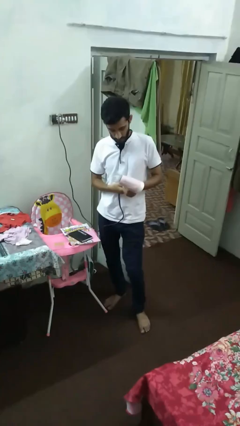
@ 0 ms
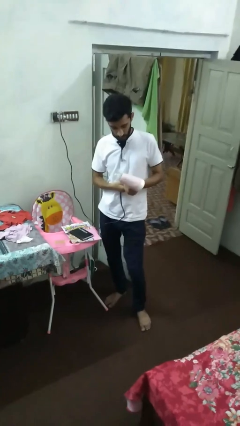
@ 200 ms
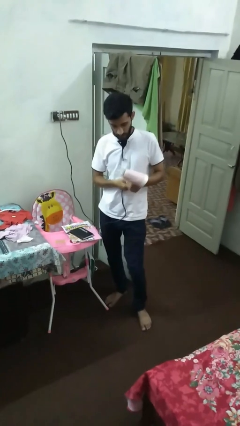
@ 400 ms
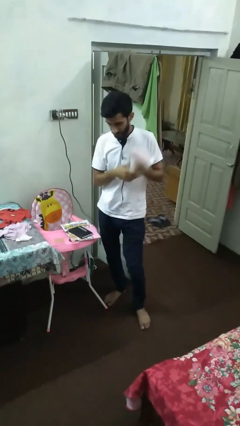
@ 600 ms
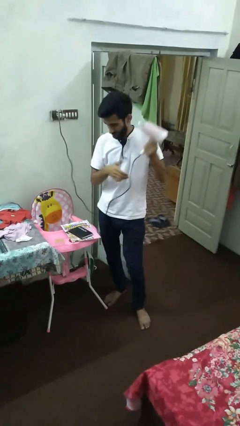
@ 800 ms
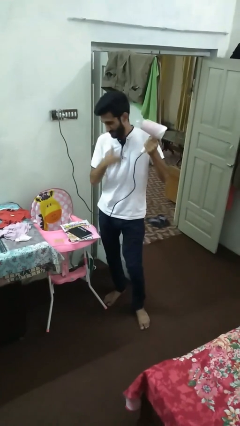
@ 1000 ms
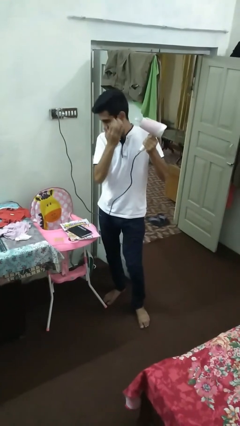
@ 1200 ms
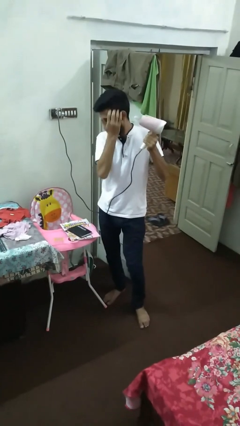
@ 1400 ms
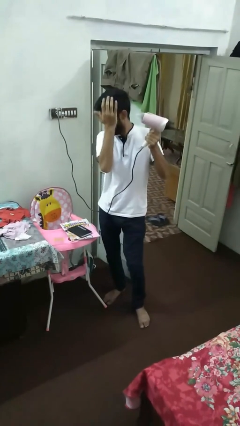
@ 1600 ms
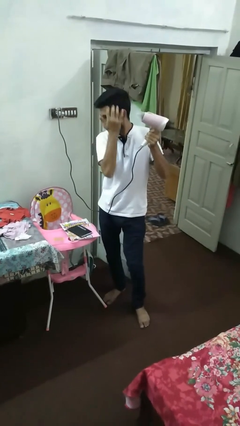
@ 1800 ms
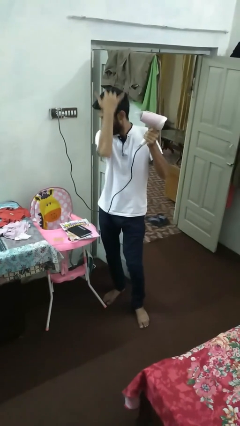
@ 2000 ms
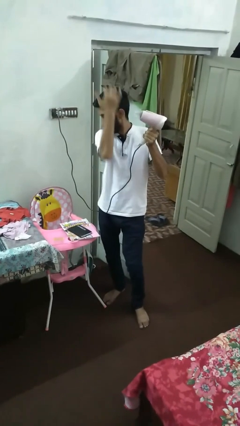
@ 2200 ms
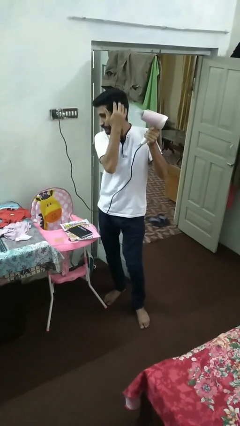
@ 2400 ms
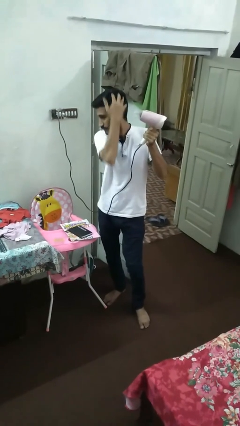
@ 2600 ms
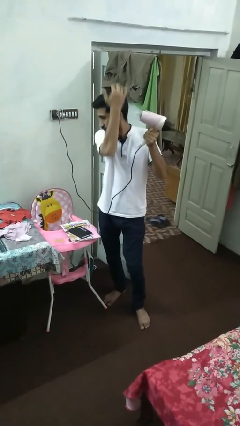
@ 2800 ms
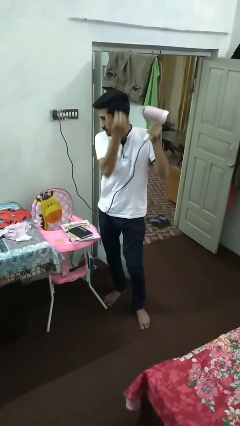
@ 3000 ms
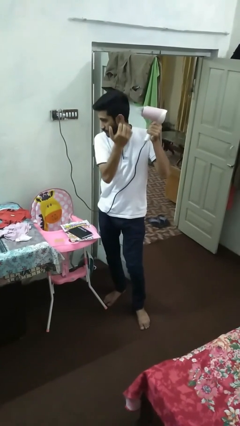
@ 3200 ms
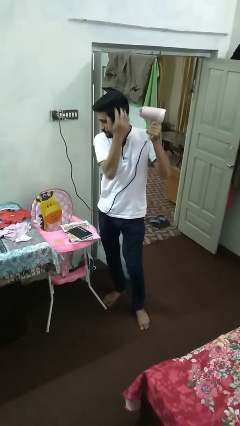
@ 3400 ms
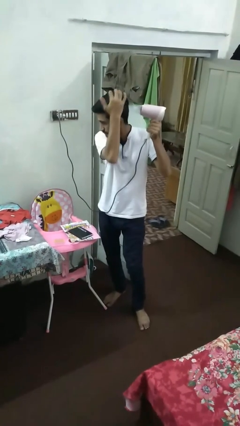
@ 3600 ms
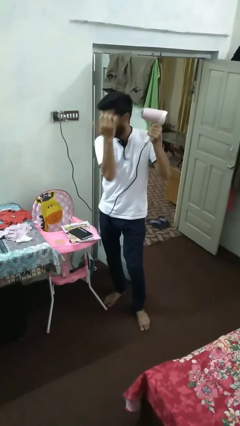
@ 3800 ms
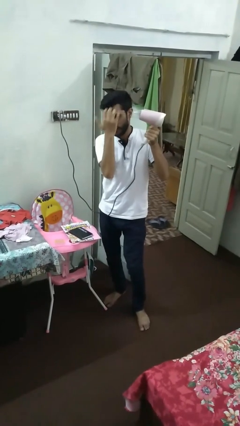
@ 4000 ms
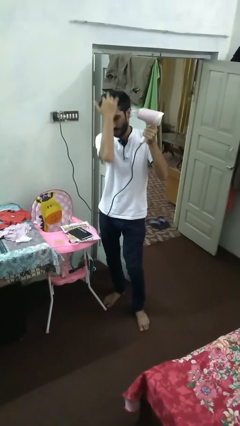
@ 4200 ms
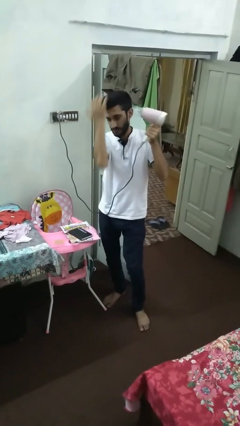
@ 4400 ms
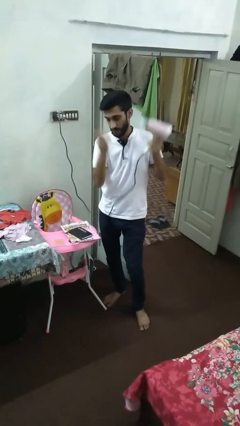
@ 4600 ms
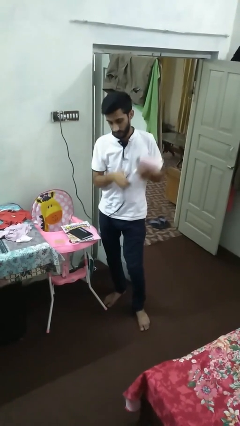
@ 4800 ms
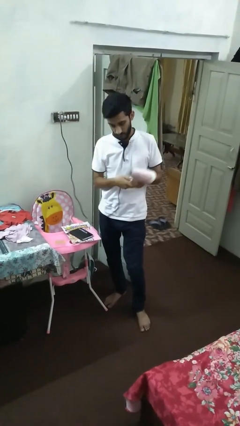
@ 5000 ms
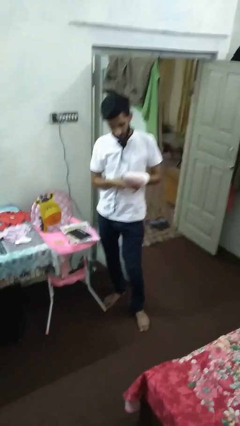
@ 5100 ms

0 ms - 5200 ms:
person dries hair with hairdryer

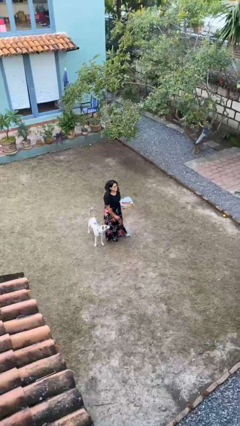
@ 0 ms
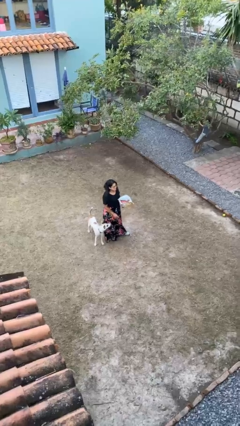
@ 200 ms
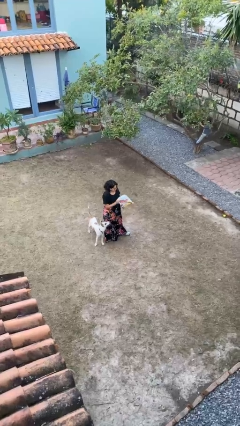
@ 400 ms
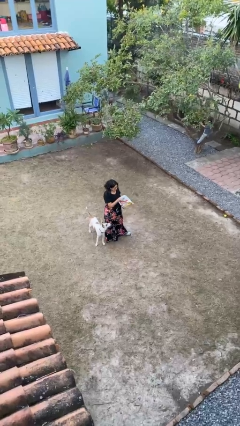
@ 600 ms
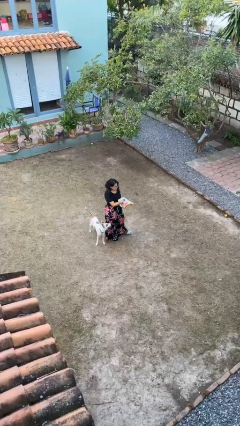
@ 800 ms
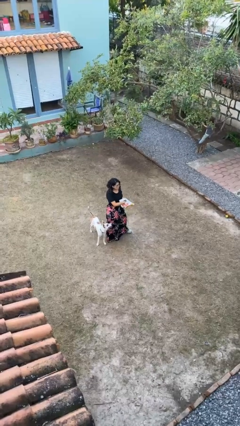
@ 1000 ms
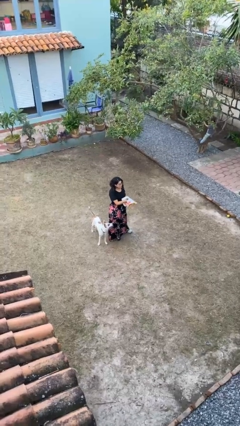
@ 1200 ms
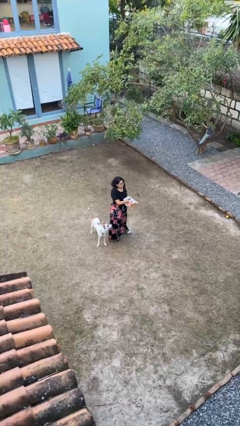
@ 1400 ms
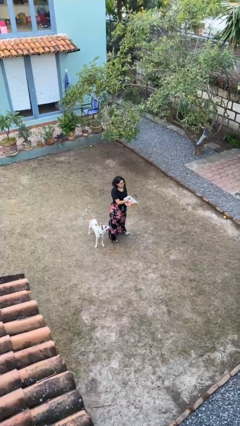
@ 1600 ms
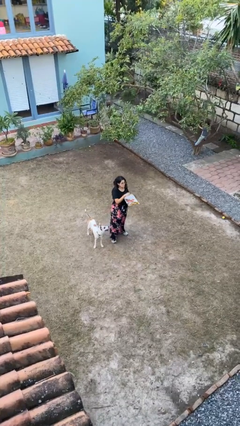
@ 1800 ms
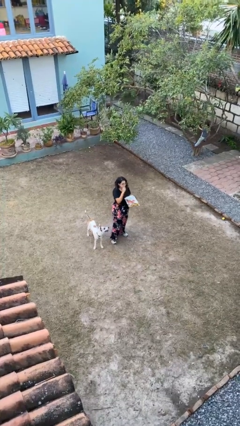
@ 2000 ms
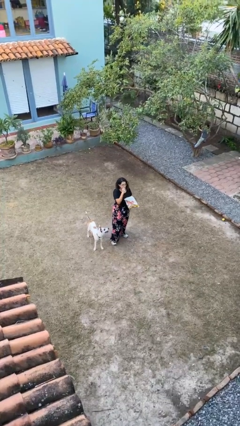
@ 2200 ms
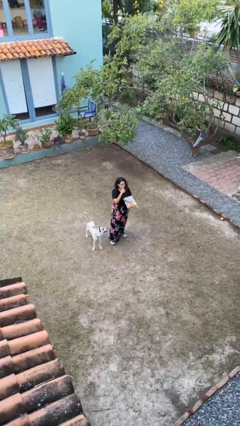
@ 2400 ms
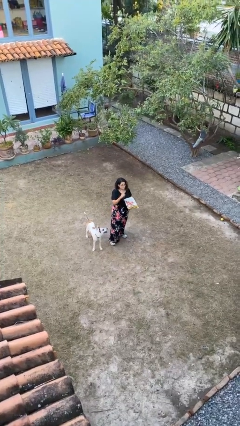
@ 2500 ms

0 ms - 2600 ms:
person eats snack from bag

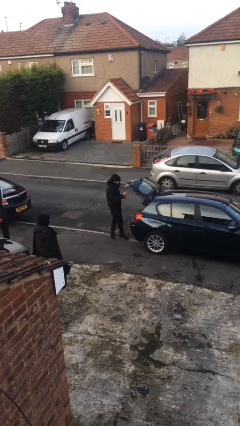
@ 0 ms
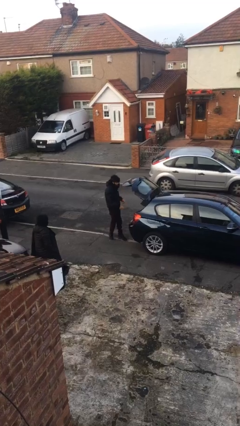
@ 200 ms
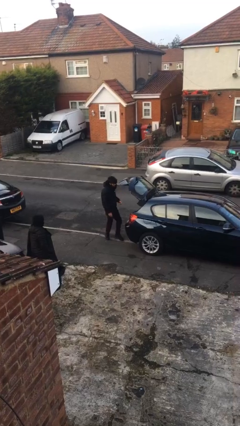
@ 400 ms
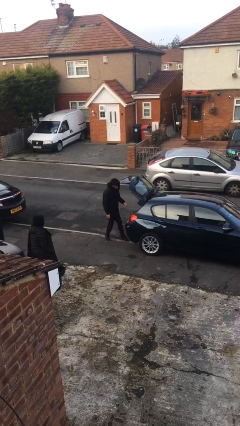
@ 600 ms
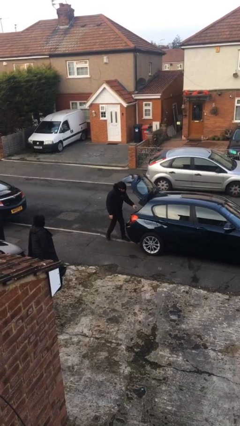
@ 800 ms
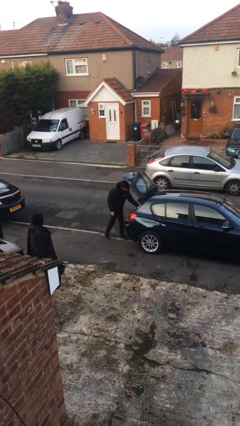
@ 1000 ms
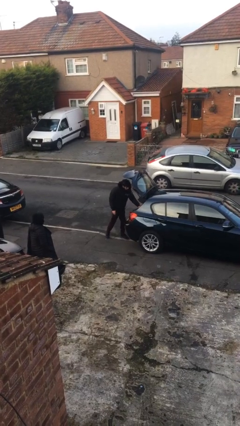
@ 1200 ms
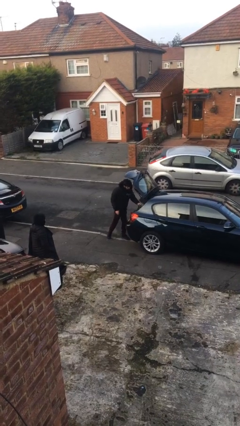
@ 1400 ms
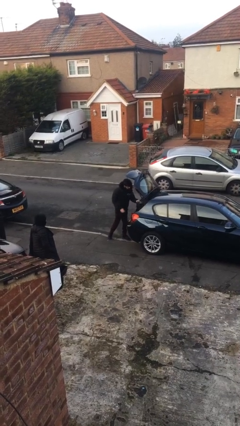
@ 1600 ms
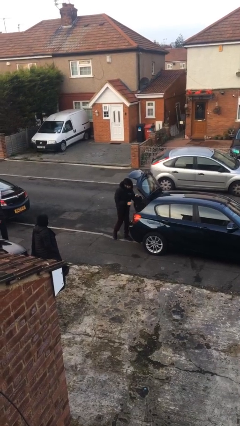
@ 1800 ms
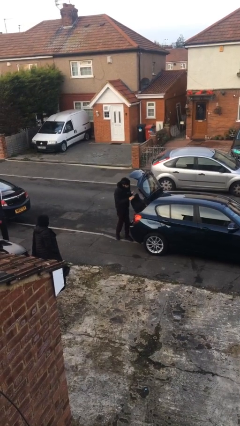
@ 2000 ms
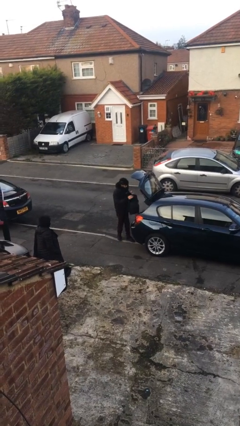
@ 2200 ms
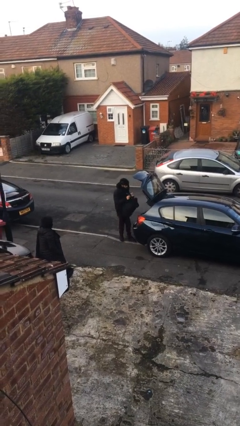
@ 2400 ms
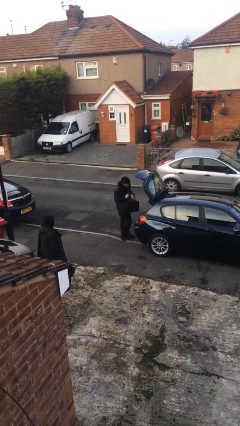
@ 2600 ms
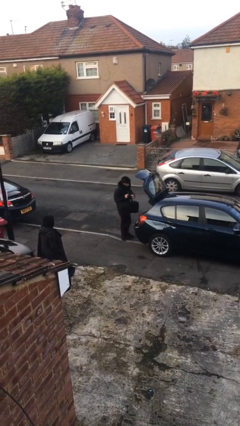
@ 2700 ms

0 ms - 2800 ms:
person unloads car

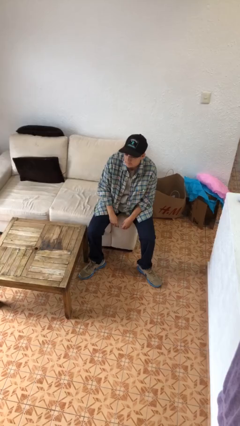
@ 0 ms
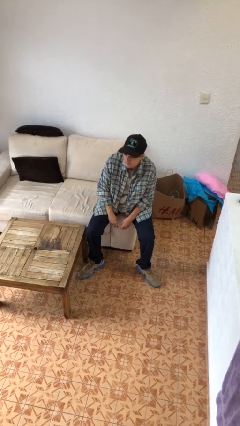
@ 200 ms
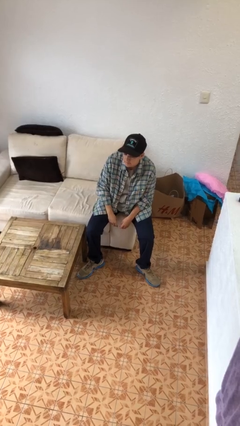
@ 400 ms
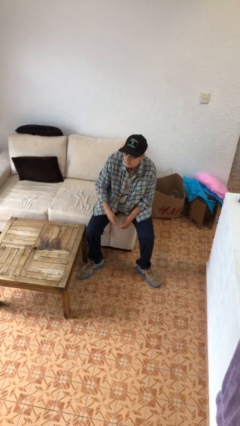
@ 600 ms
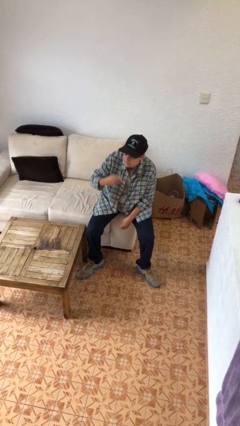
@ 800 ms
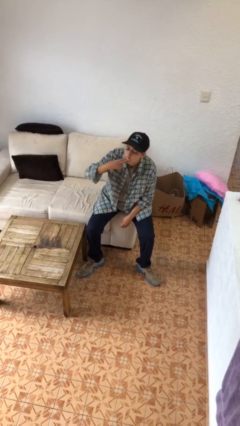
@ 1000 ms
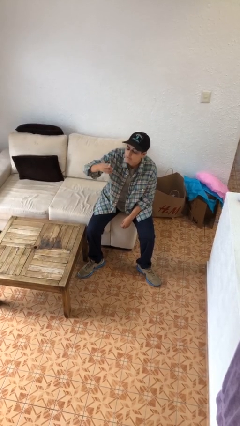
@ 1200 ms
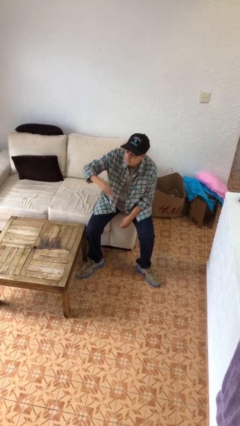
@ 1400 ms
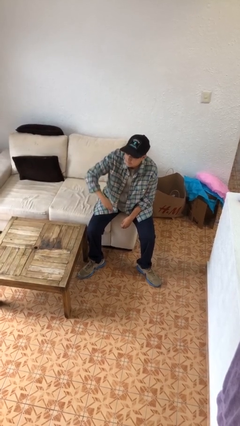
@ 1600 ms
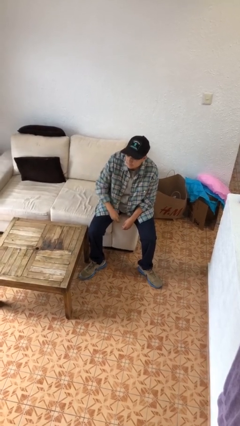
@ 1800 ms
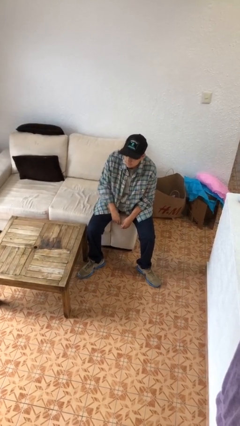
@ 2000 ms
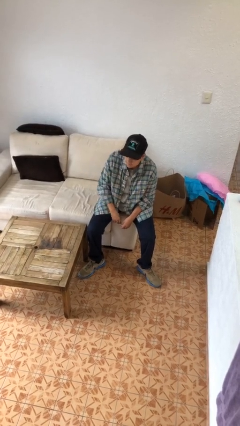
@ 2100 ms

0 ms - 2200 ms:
person gestures blow kiss

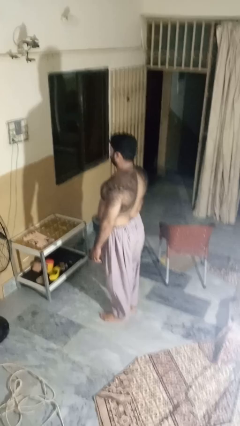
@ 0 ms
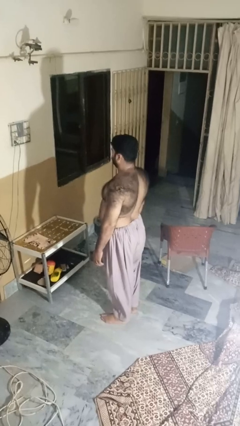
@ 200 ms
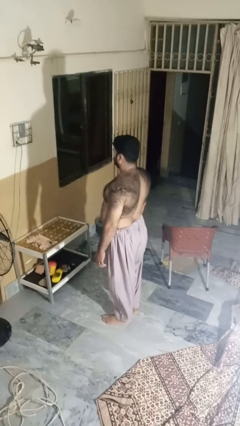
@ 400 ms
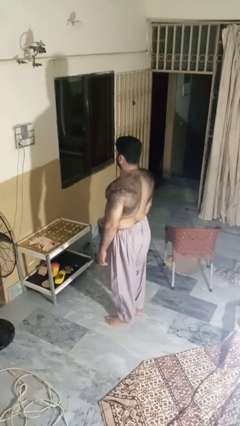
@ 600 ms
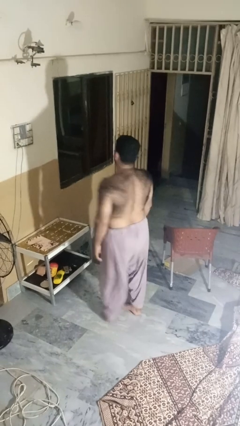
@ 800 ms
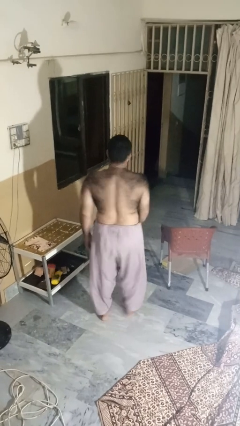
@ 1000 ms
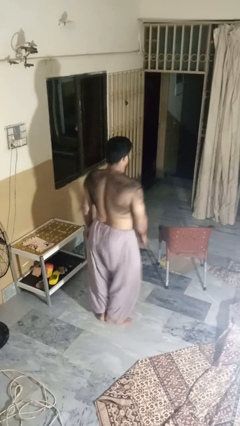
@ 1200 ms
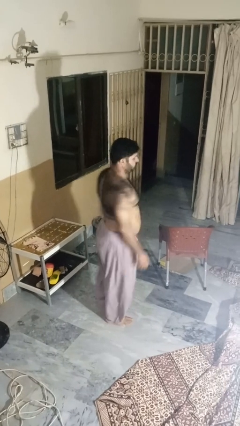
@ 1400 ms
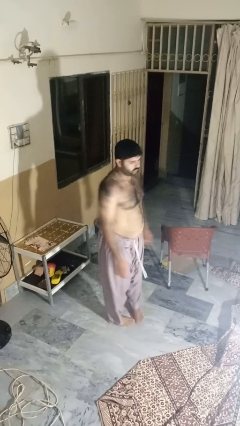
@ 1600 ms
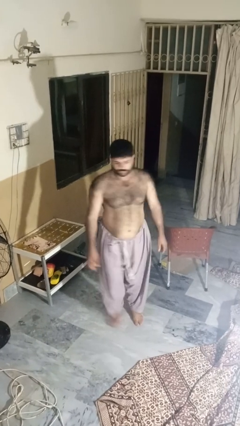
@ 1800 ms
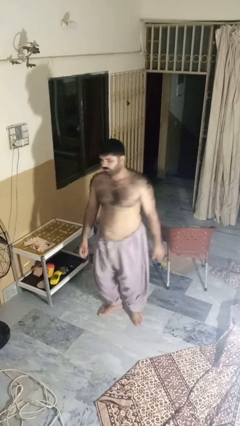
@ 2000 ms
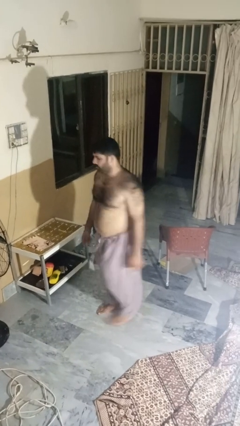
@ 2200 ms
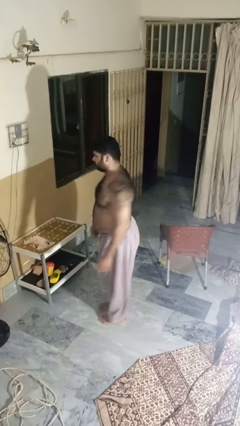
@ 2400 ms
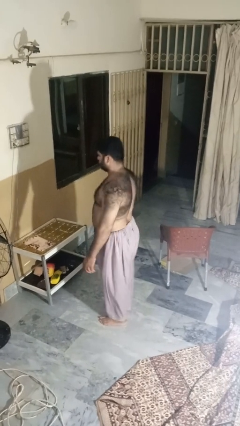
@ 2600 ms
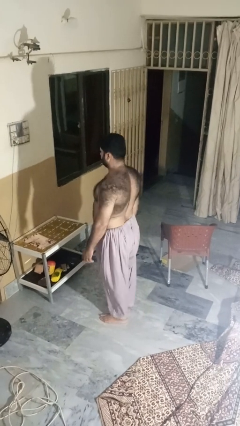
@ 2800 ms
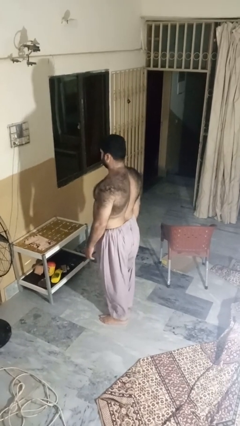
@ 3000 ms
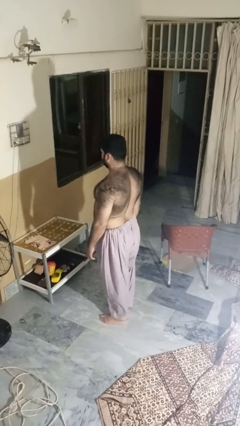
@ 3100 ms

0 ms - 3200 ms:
person twirls

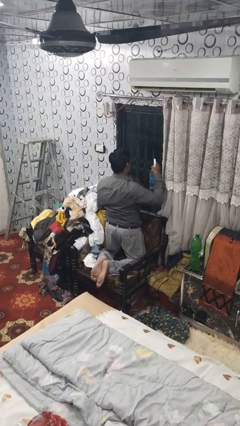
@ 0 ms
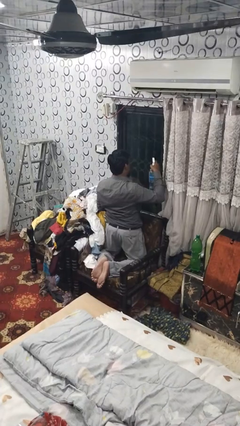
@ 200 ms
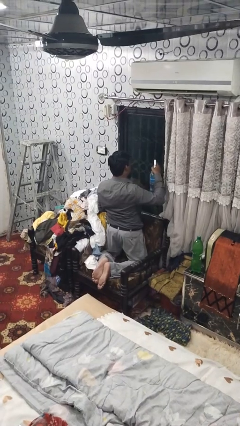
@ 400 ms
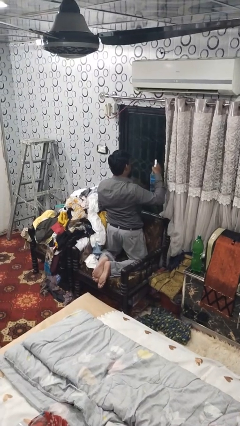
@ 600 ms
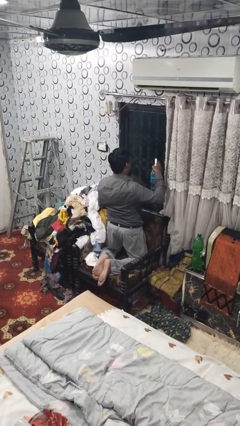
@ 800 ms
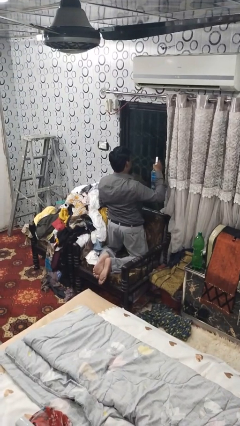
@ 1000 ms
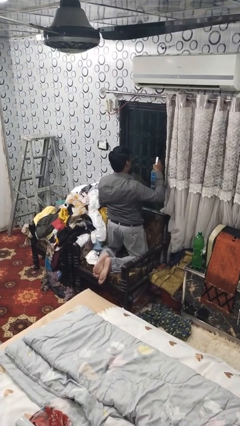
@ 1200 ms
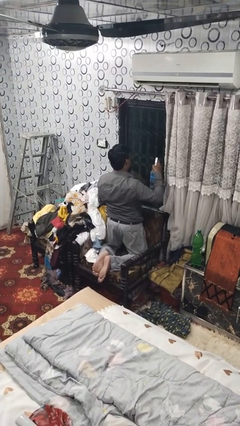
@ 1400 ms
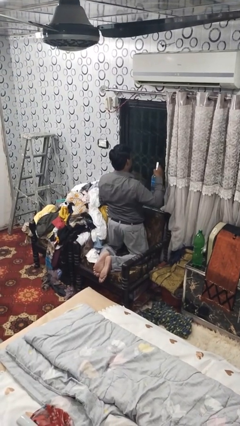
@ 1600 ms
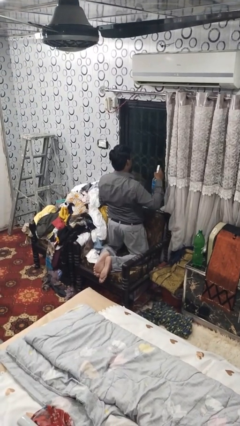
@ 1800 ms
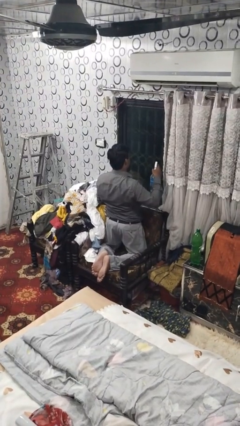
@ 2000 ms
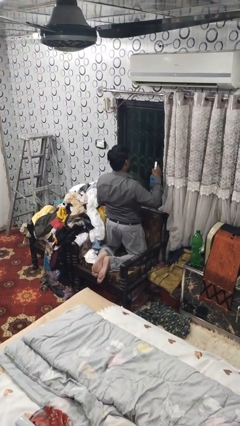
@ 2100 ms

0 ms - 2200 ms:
person sprays from bottle
